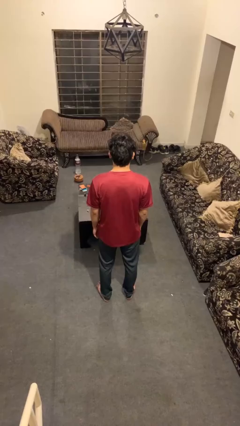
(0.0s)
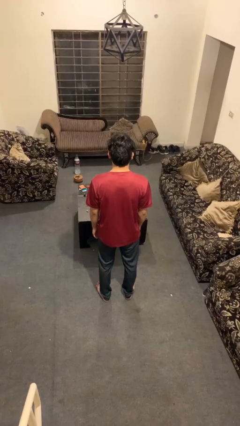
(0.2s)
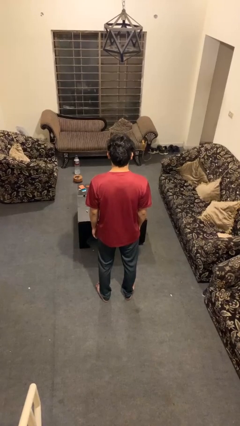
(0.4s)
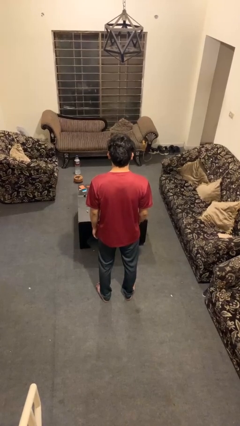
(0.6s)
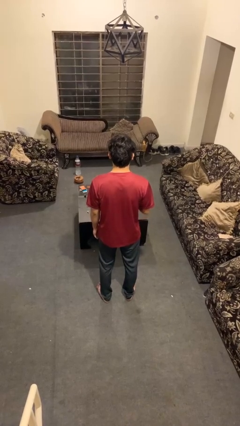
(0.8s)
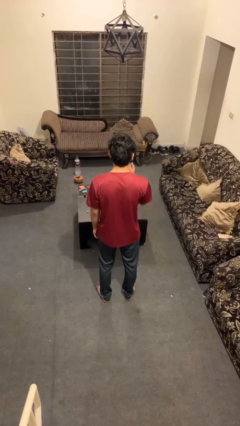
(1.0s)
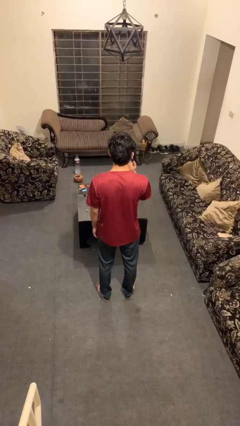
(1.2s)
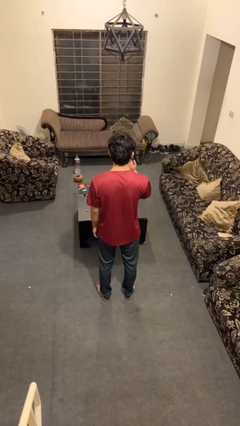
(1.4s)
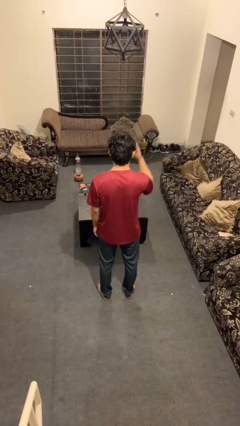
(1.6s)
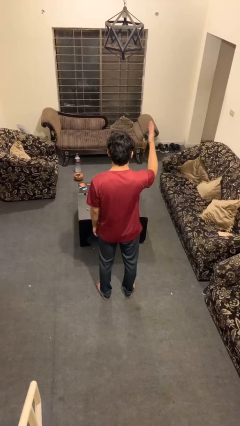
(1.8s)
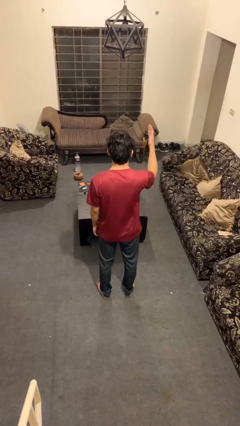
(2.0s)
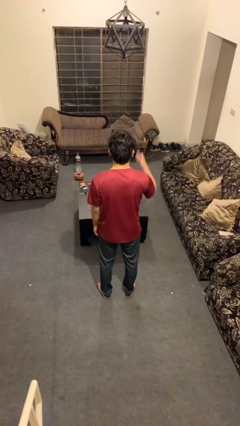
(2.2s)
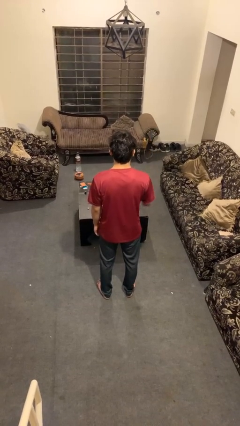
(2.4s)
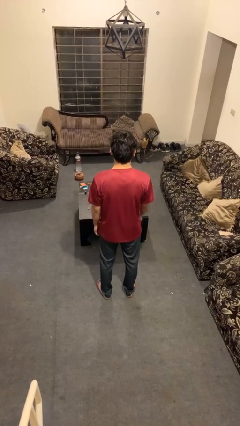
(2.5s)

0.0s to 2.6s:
person gestures blow kiss

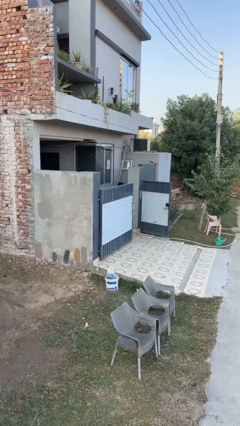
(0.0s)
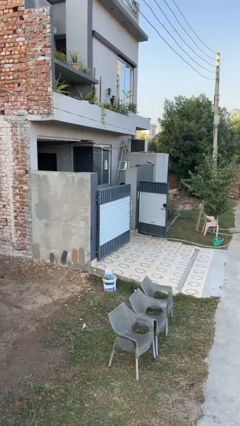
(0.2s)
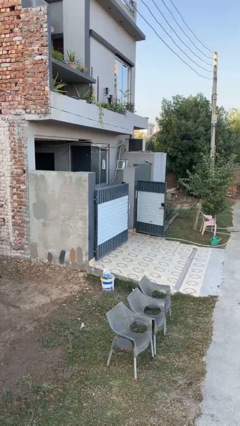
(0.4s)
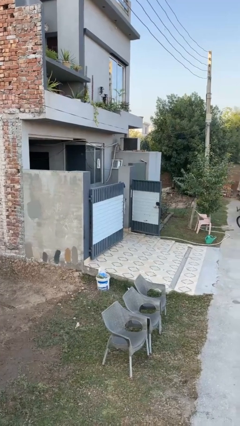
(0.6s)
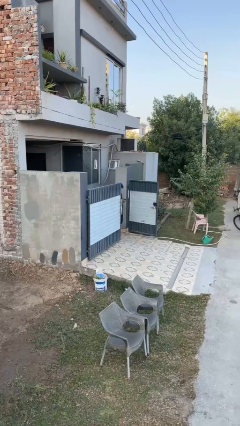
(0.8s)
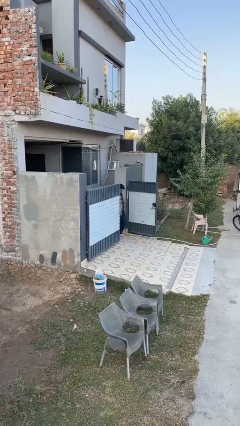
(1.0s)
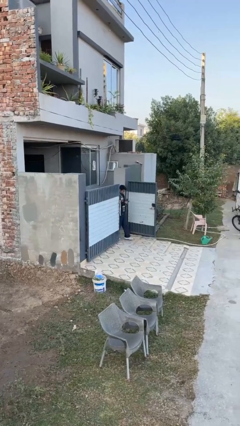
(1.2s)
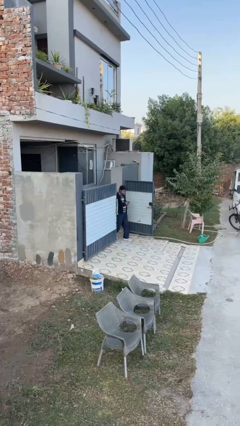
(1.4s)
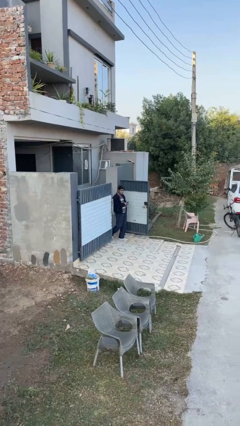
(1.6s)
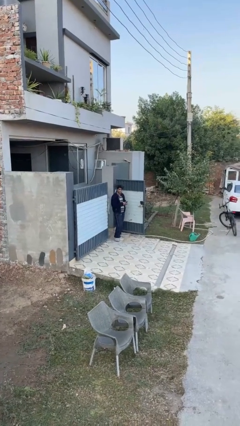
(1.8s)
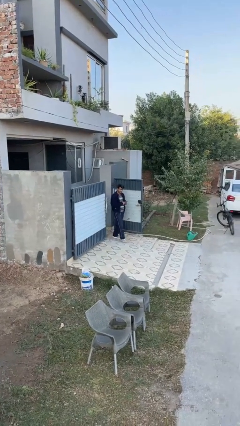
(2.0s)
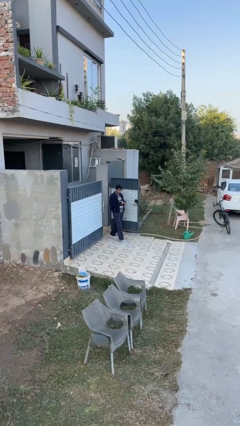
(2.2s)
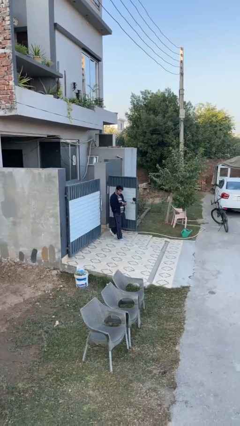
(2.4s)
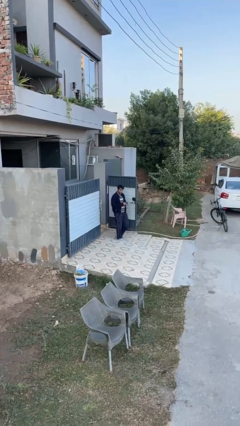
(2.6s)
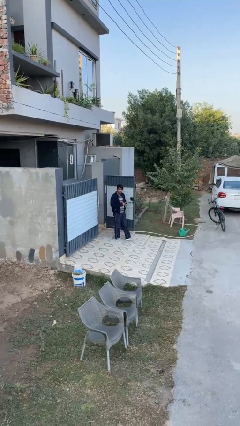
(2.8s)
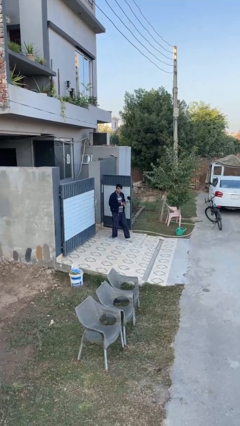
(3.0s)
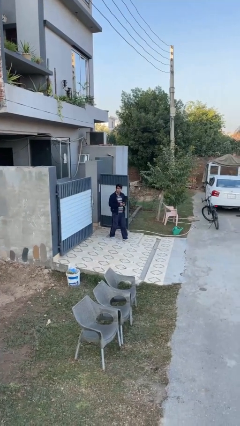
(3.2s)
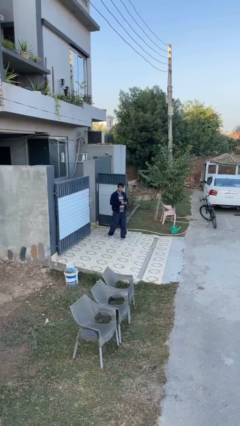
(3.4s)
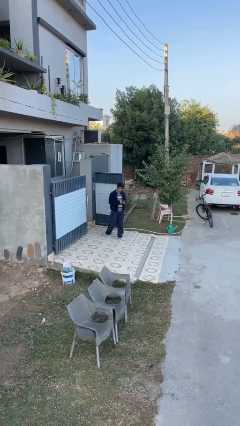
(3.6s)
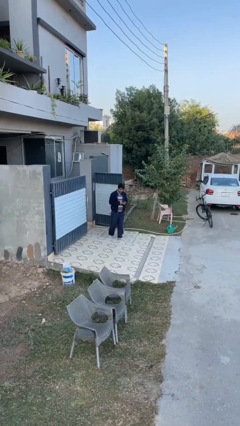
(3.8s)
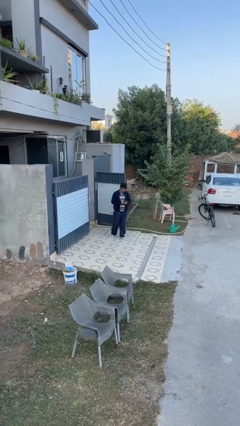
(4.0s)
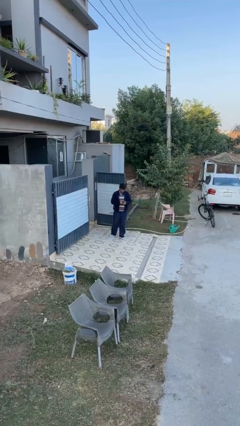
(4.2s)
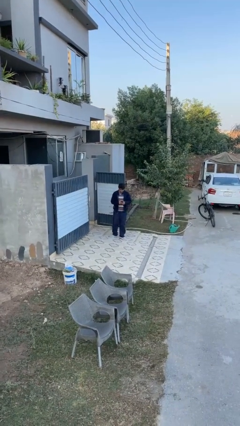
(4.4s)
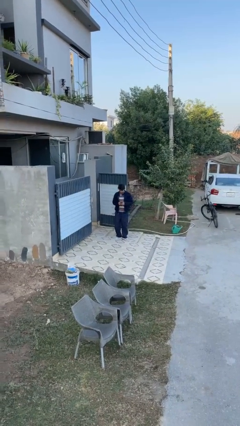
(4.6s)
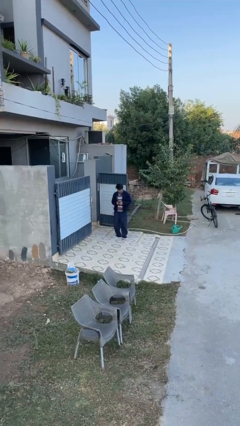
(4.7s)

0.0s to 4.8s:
person enters scene through structure

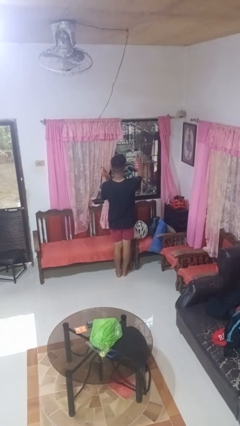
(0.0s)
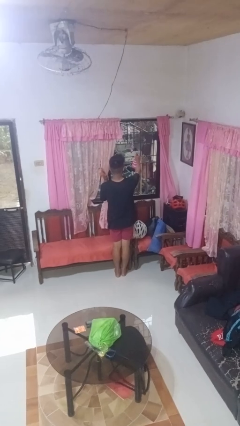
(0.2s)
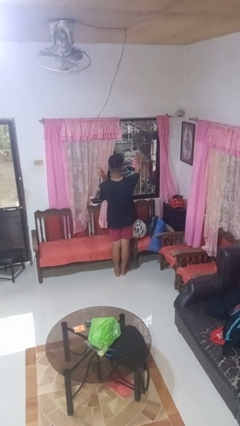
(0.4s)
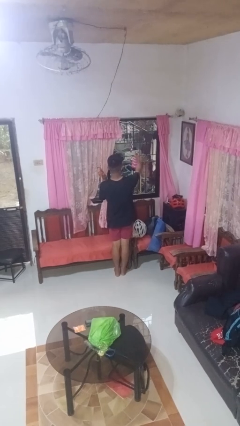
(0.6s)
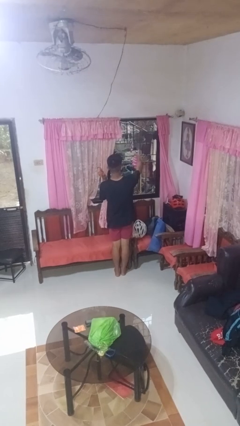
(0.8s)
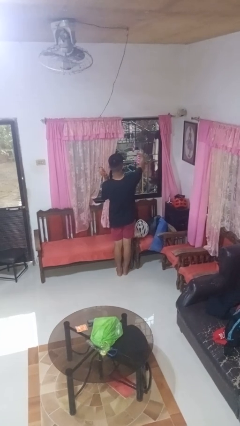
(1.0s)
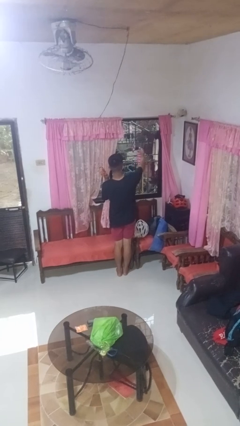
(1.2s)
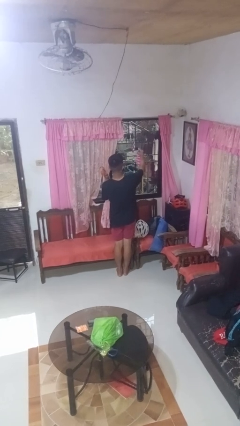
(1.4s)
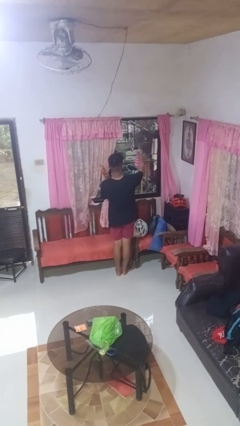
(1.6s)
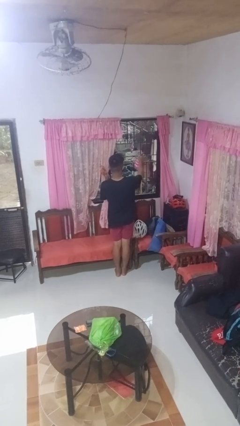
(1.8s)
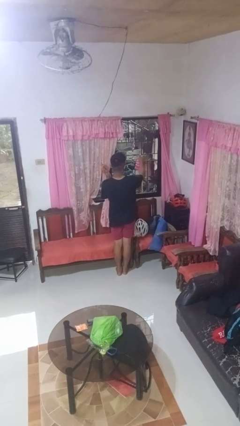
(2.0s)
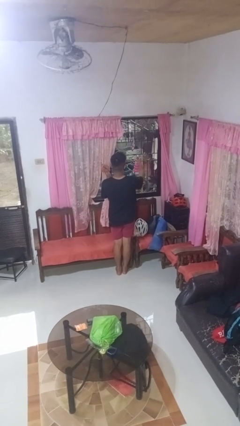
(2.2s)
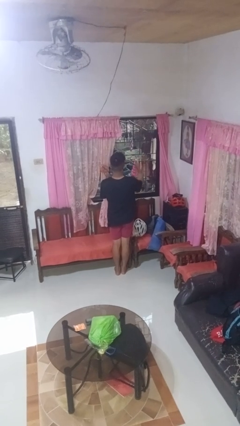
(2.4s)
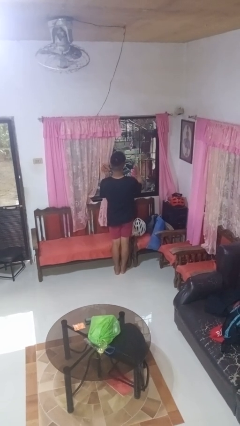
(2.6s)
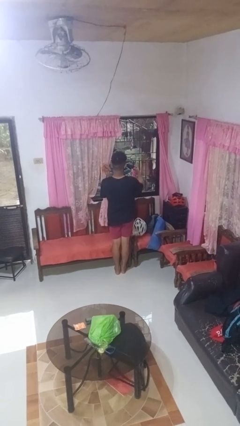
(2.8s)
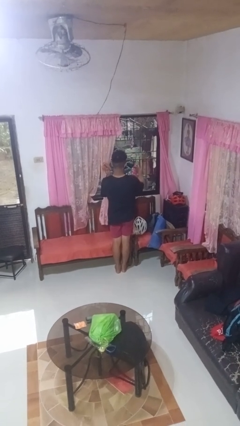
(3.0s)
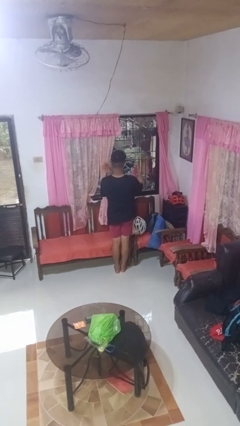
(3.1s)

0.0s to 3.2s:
person sprays from bottle

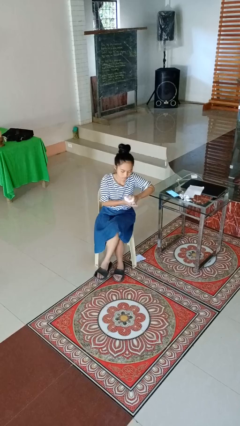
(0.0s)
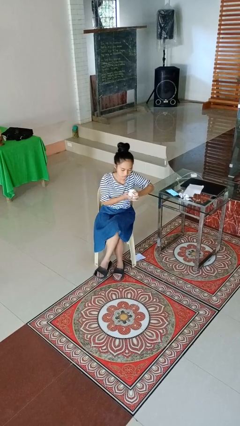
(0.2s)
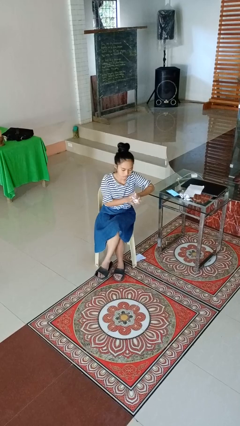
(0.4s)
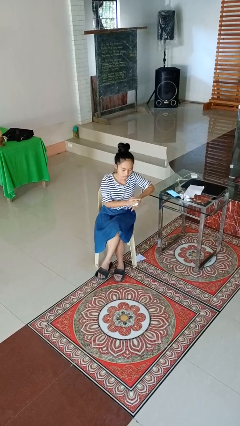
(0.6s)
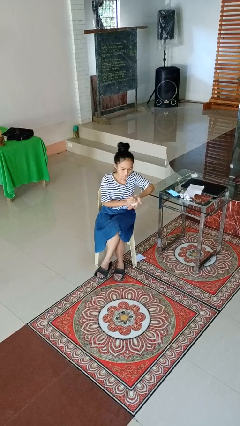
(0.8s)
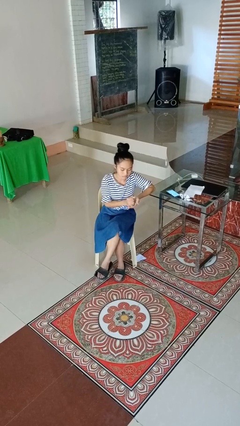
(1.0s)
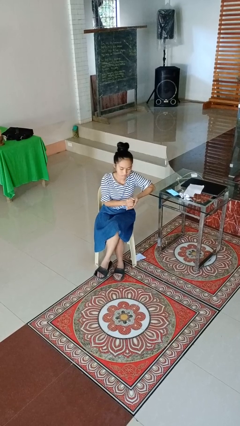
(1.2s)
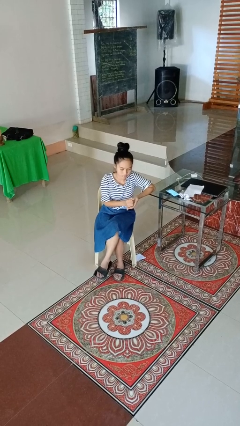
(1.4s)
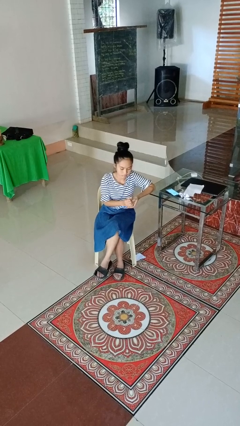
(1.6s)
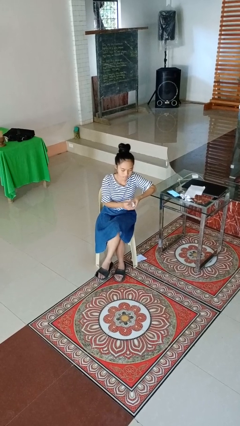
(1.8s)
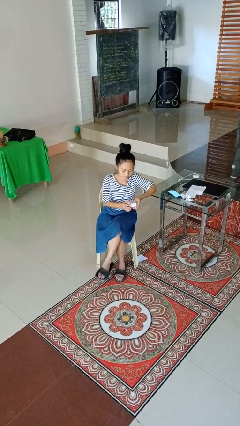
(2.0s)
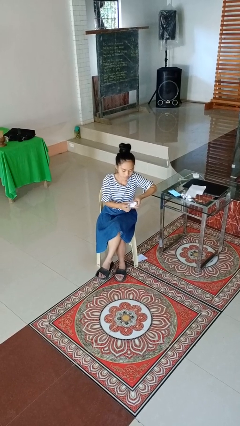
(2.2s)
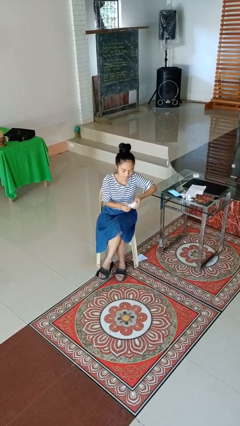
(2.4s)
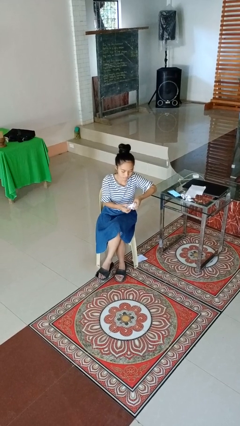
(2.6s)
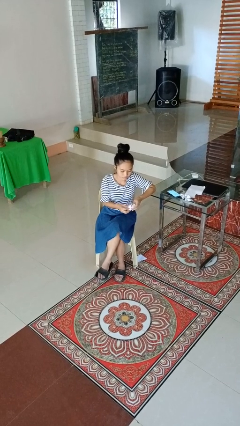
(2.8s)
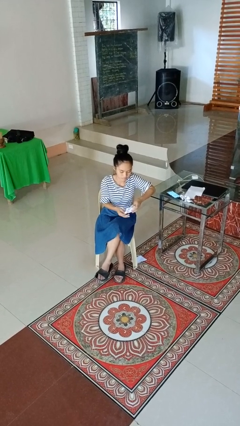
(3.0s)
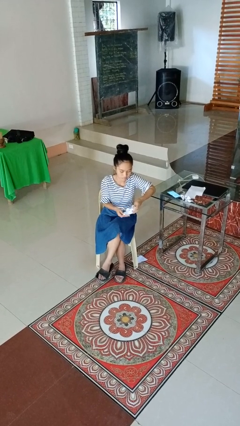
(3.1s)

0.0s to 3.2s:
person crumples paper

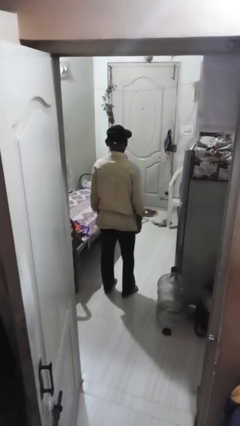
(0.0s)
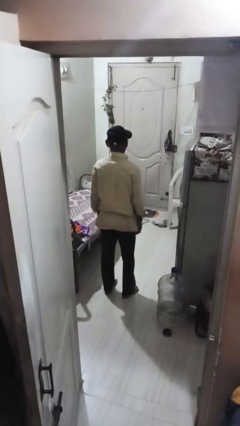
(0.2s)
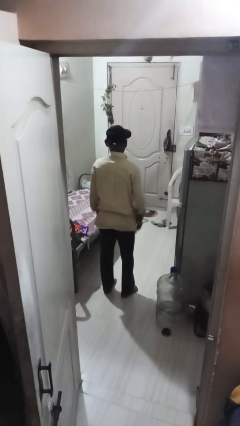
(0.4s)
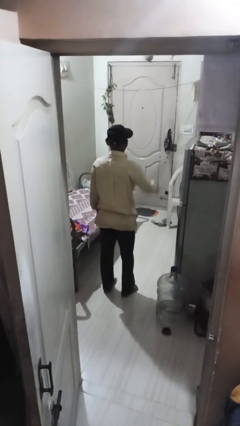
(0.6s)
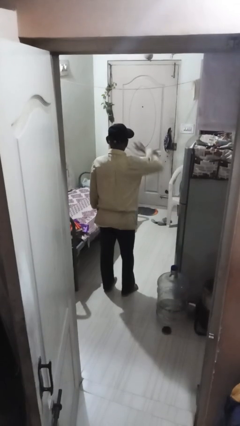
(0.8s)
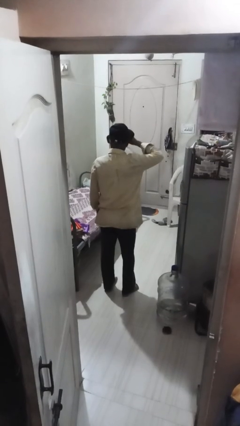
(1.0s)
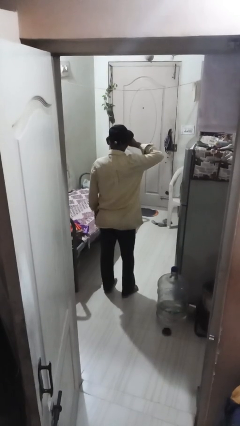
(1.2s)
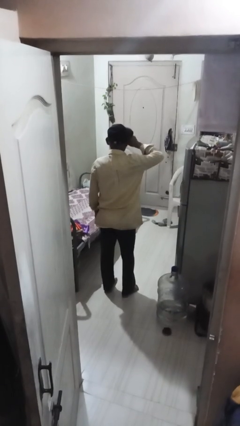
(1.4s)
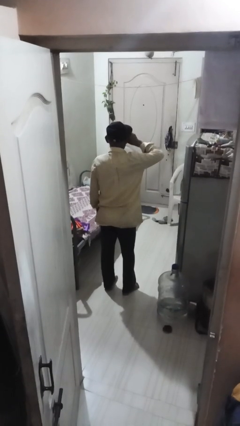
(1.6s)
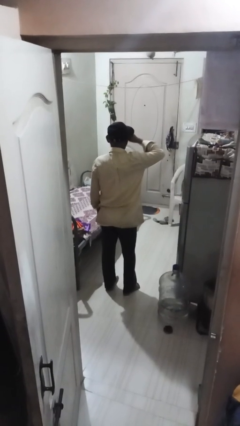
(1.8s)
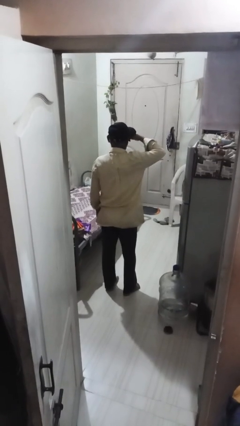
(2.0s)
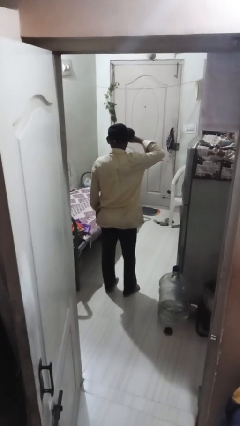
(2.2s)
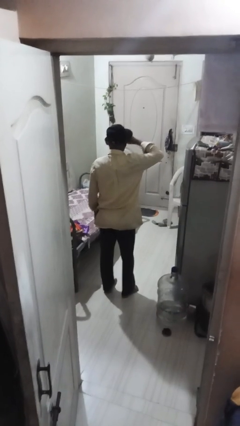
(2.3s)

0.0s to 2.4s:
person rubs eyes

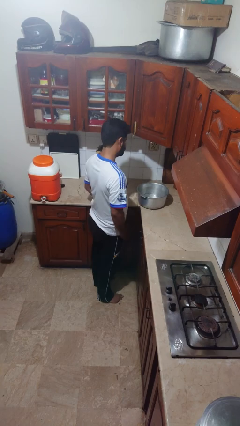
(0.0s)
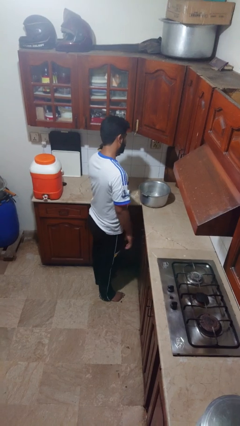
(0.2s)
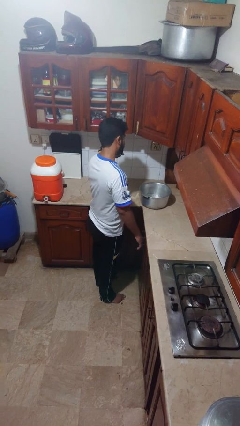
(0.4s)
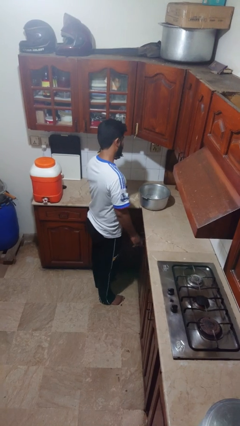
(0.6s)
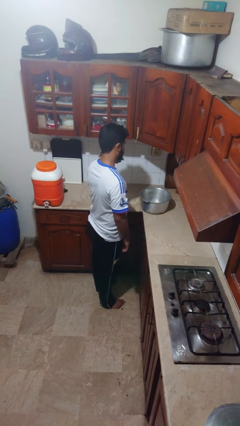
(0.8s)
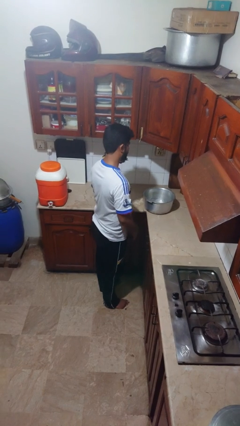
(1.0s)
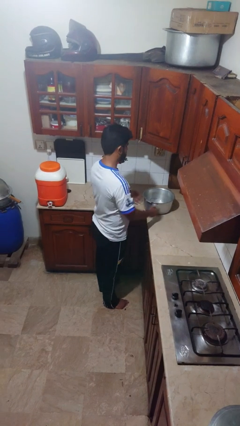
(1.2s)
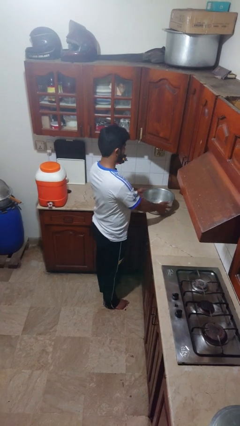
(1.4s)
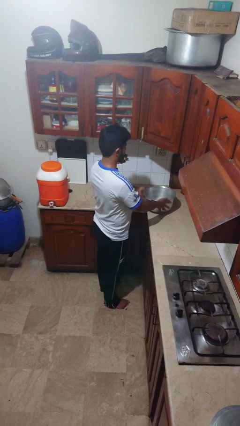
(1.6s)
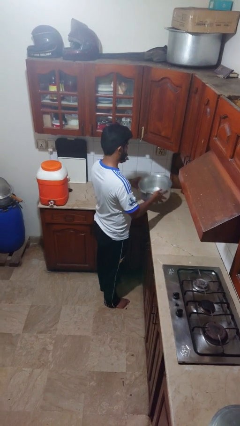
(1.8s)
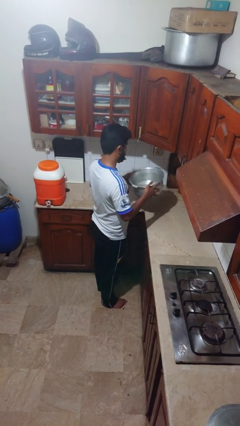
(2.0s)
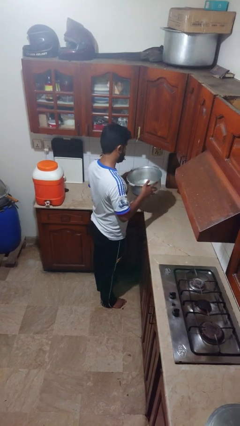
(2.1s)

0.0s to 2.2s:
person picks up object from countertop
